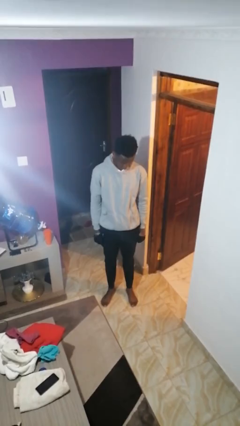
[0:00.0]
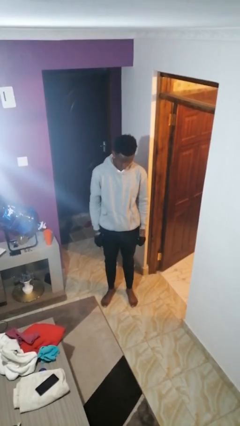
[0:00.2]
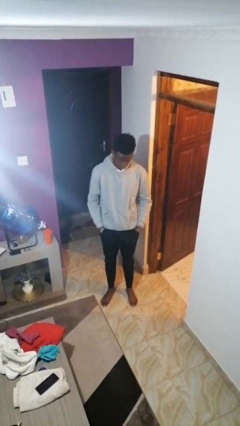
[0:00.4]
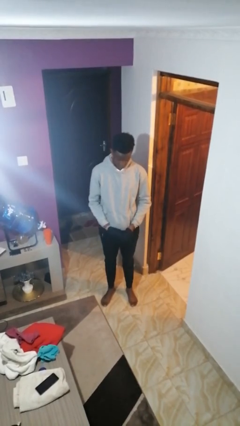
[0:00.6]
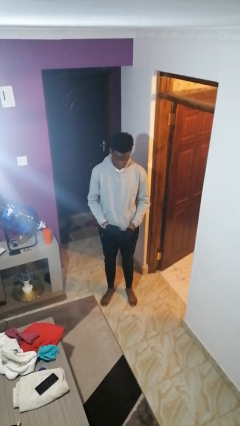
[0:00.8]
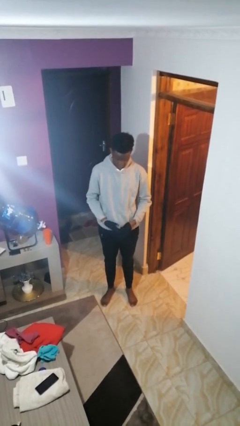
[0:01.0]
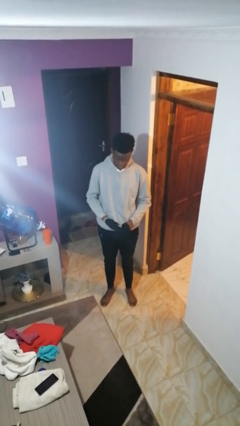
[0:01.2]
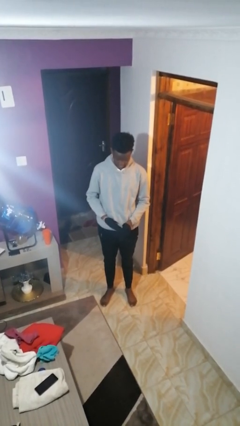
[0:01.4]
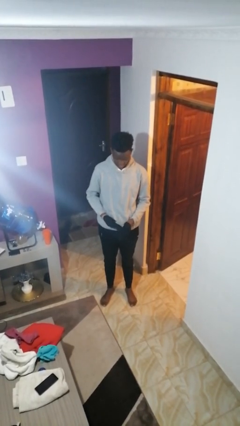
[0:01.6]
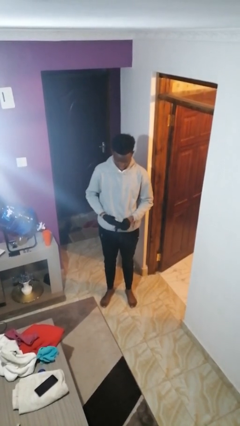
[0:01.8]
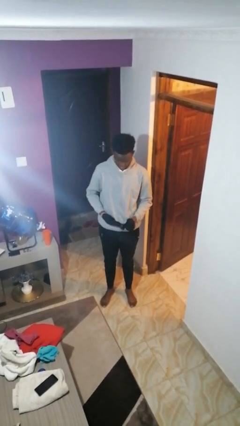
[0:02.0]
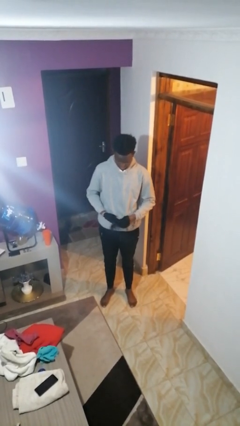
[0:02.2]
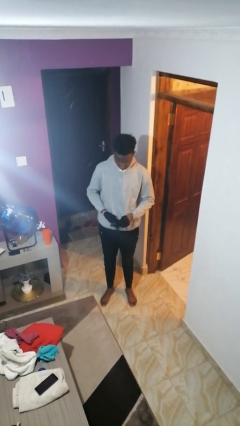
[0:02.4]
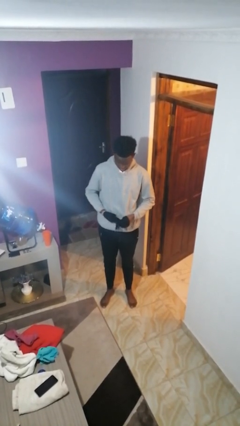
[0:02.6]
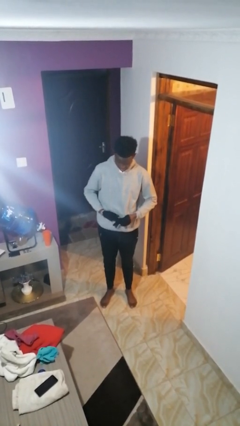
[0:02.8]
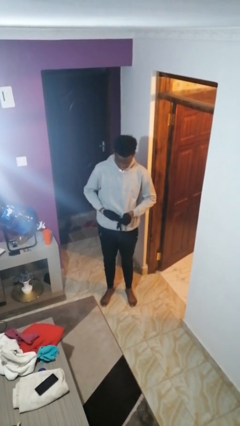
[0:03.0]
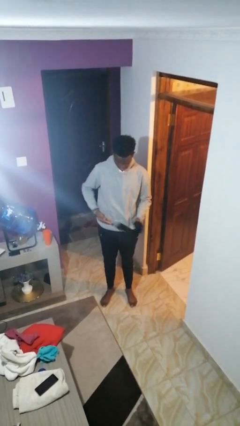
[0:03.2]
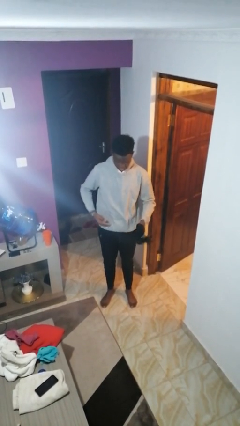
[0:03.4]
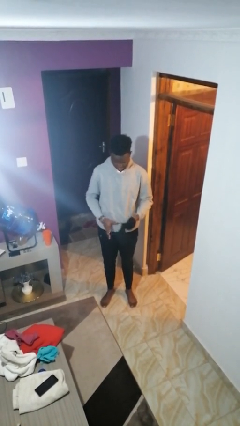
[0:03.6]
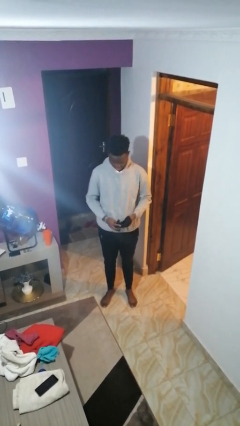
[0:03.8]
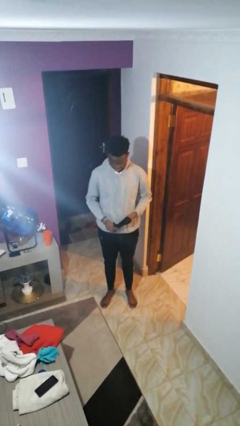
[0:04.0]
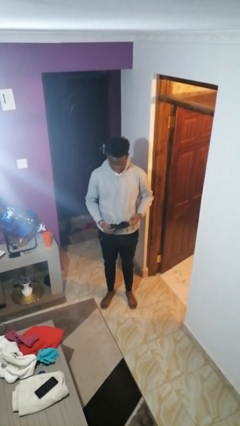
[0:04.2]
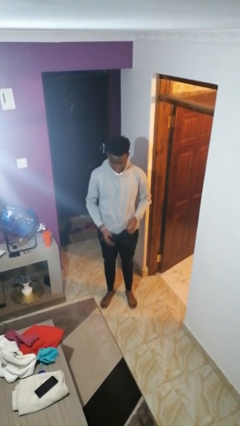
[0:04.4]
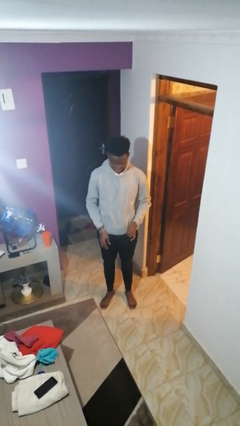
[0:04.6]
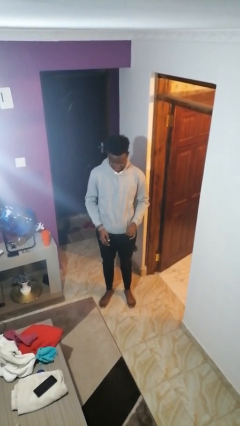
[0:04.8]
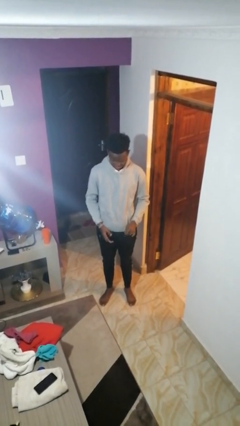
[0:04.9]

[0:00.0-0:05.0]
person takes off gloves

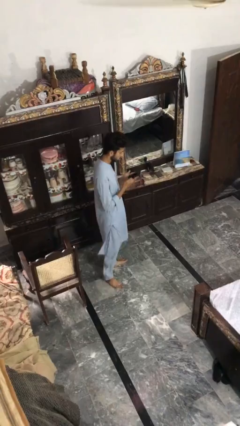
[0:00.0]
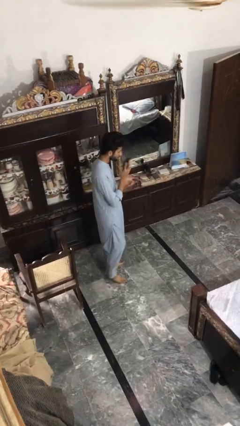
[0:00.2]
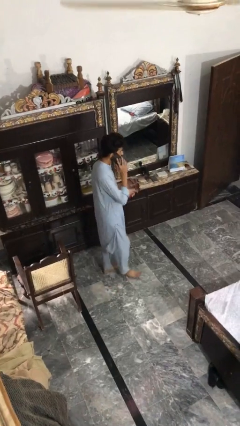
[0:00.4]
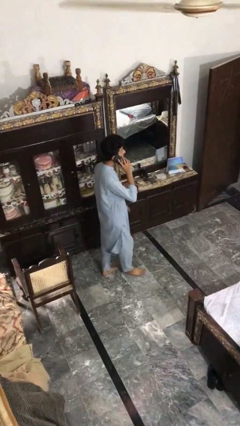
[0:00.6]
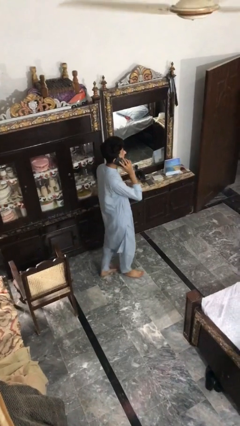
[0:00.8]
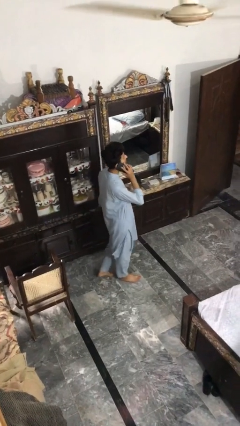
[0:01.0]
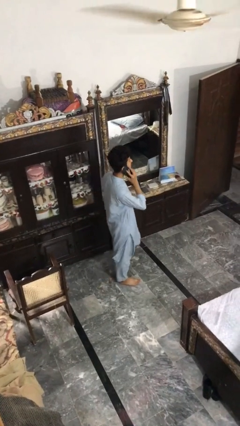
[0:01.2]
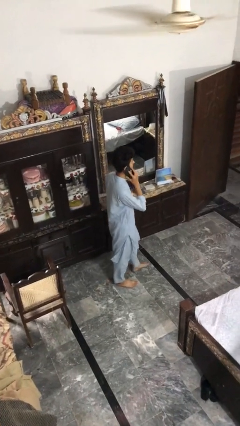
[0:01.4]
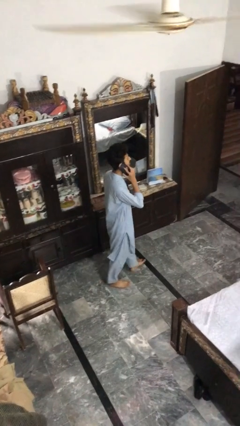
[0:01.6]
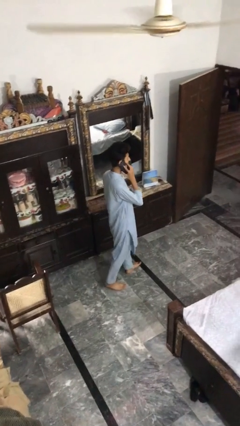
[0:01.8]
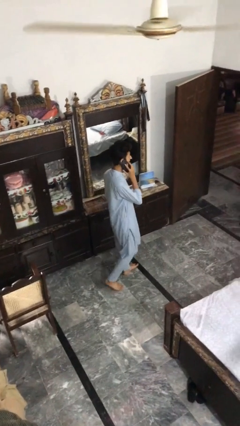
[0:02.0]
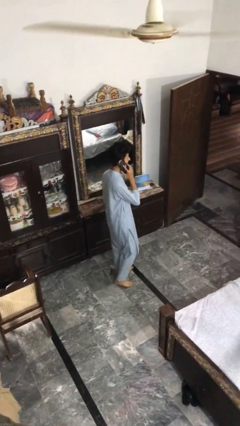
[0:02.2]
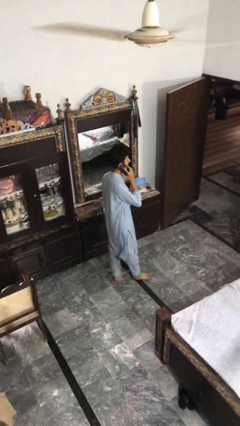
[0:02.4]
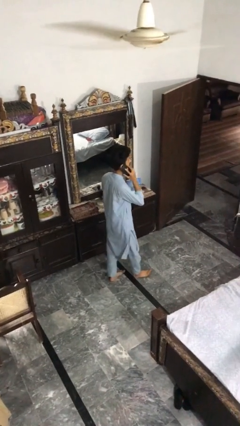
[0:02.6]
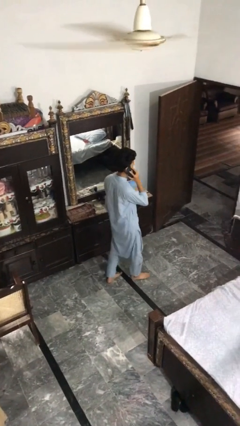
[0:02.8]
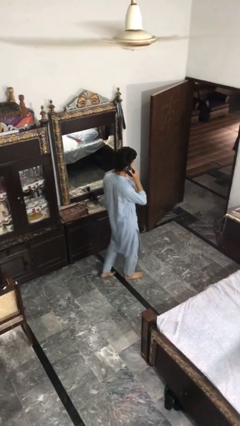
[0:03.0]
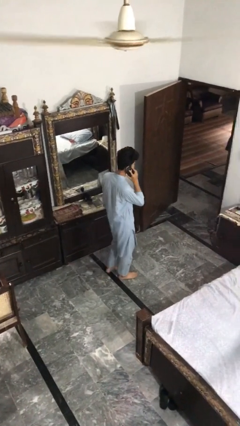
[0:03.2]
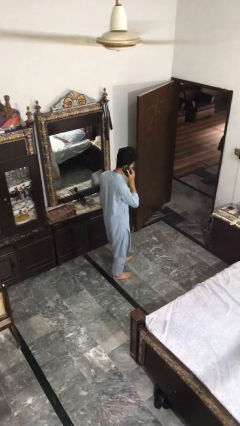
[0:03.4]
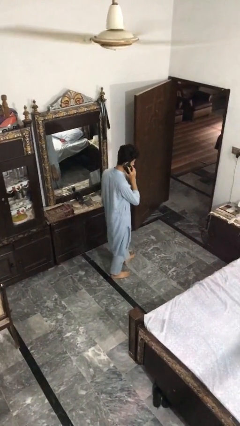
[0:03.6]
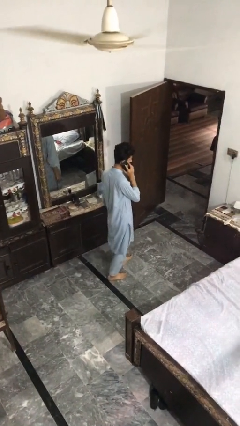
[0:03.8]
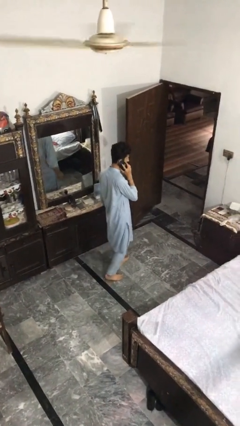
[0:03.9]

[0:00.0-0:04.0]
person talks on phone

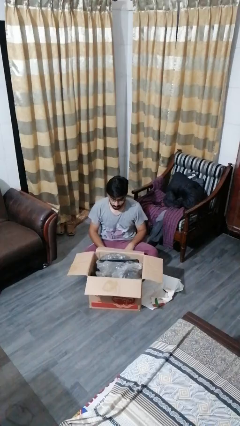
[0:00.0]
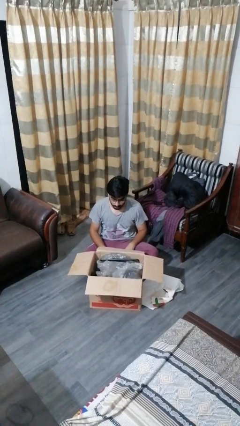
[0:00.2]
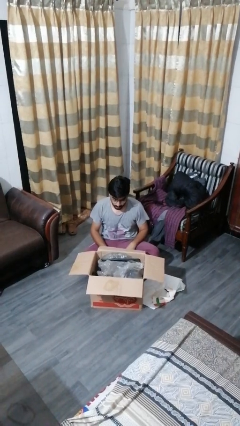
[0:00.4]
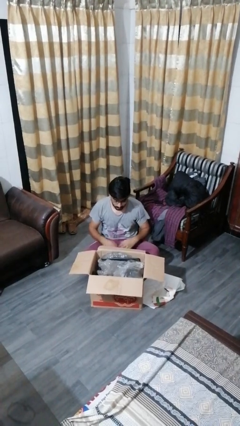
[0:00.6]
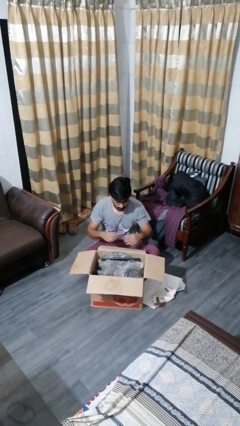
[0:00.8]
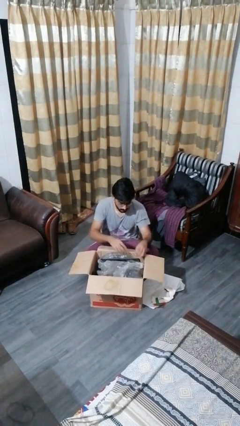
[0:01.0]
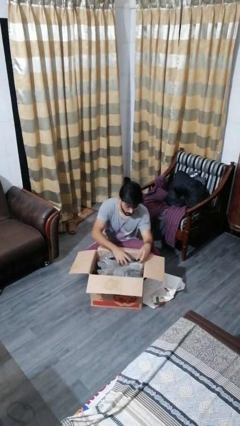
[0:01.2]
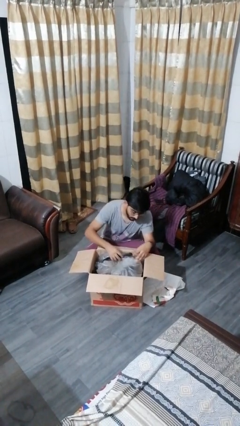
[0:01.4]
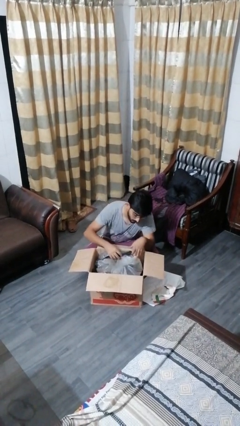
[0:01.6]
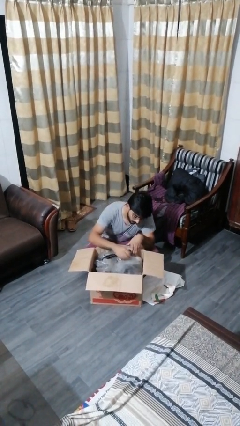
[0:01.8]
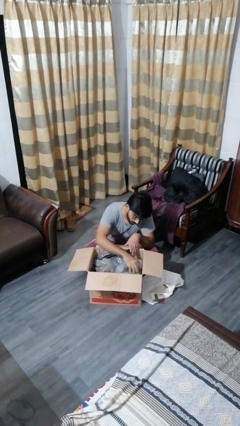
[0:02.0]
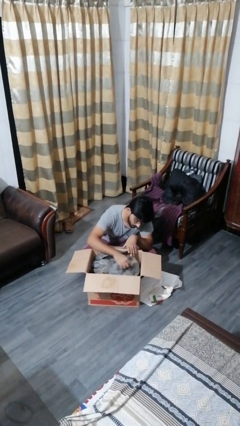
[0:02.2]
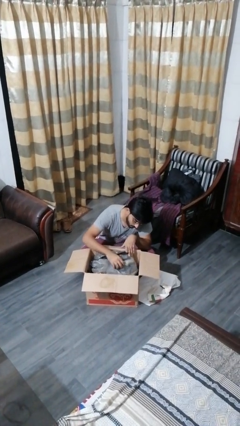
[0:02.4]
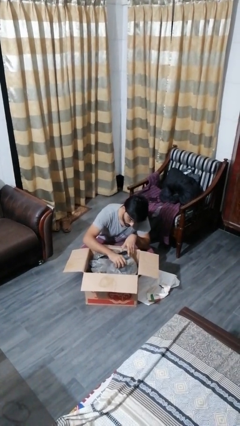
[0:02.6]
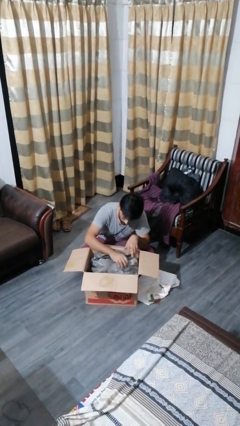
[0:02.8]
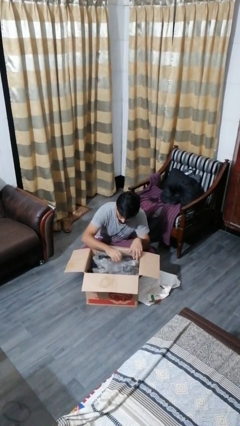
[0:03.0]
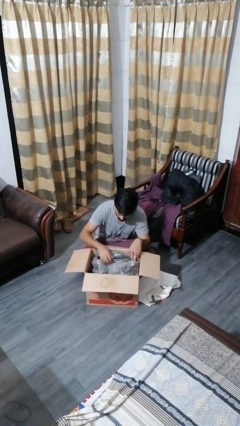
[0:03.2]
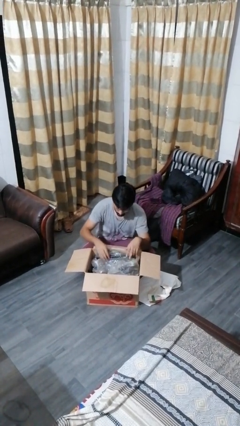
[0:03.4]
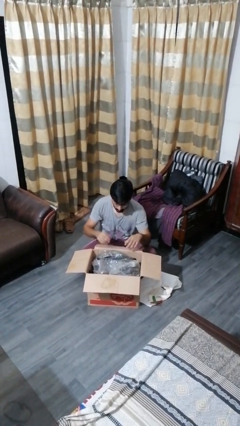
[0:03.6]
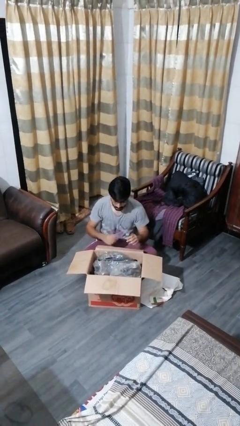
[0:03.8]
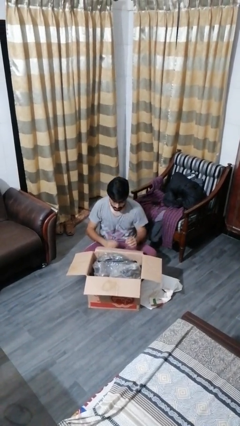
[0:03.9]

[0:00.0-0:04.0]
person searches in box

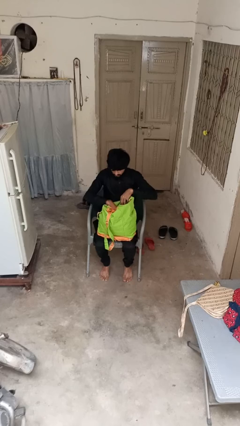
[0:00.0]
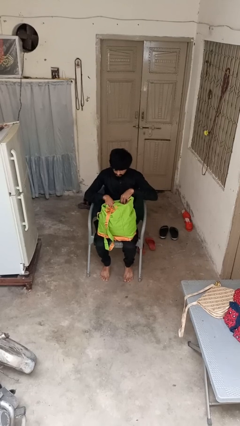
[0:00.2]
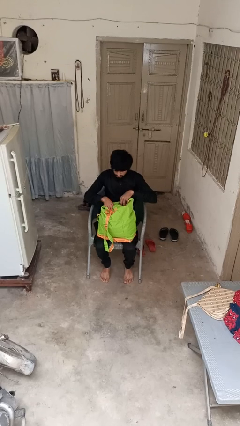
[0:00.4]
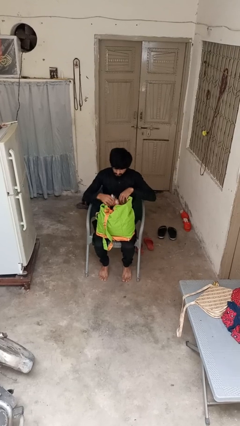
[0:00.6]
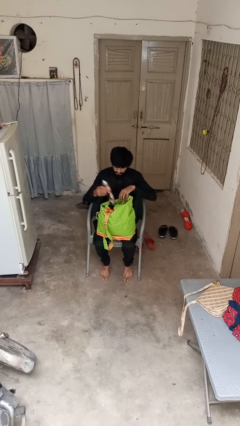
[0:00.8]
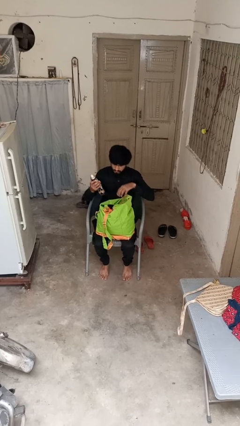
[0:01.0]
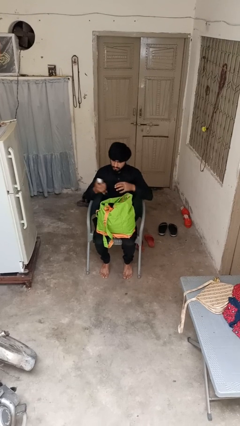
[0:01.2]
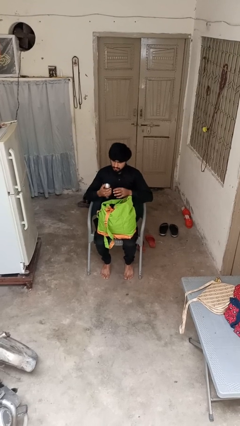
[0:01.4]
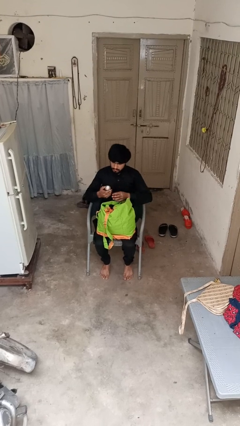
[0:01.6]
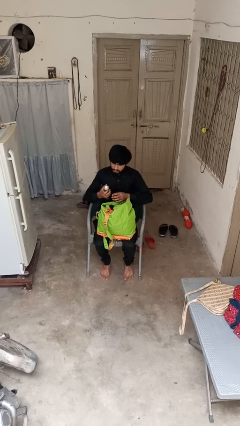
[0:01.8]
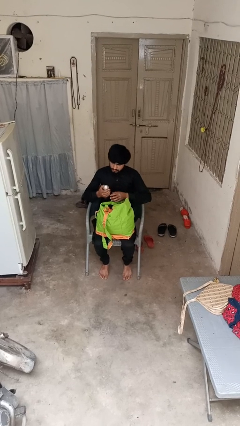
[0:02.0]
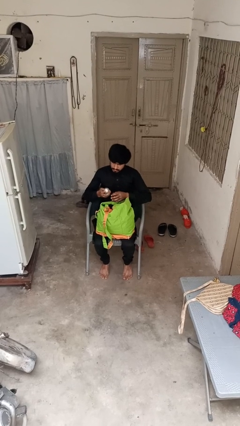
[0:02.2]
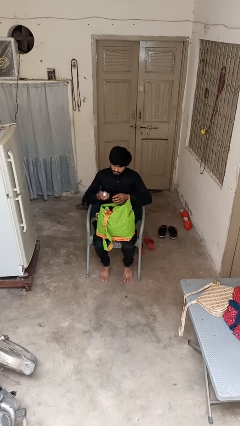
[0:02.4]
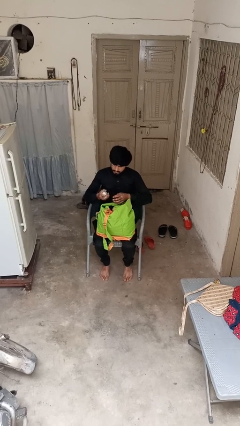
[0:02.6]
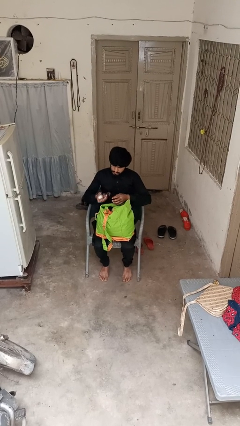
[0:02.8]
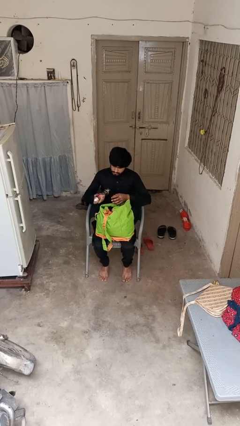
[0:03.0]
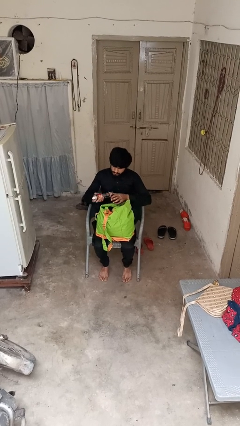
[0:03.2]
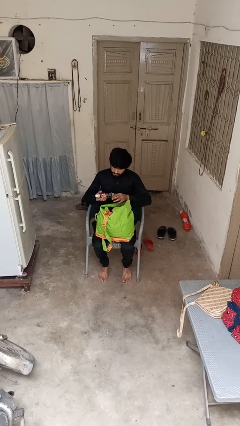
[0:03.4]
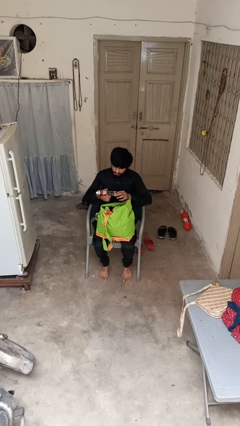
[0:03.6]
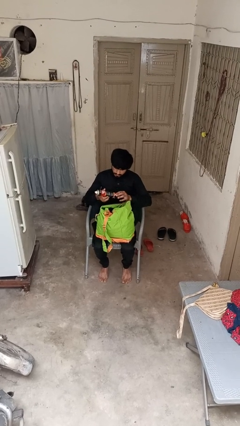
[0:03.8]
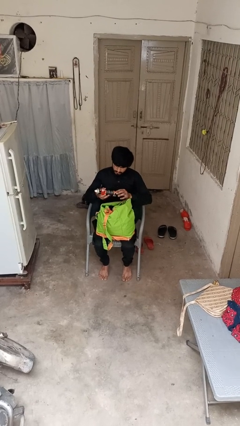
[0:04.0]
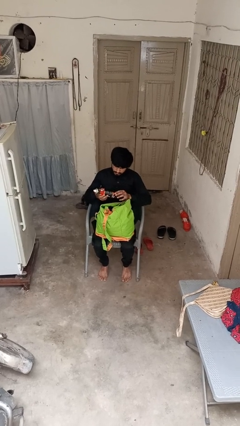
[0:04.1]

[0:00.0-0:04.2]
person takes object from backpack

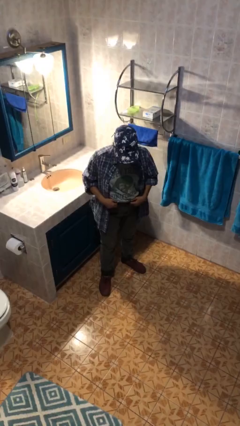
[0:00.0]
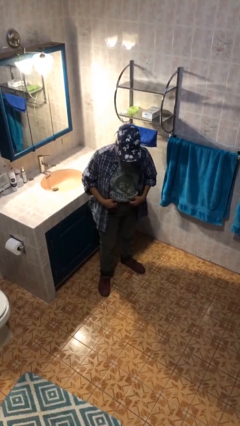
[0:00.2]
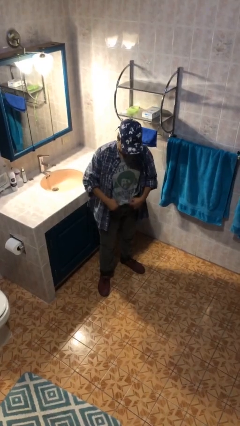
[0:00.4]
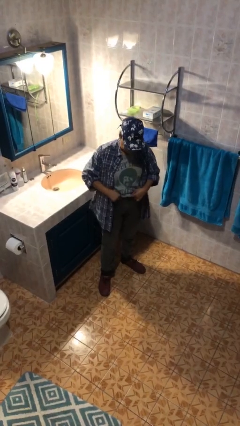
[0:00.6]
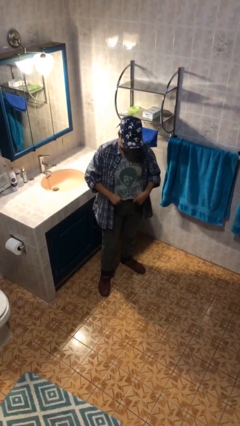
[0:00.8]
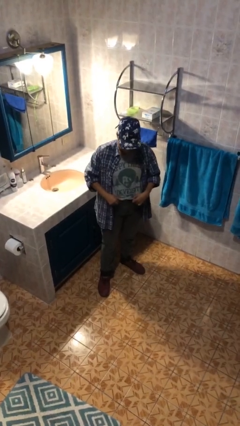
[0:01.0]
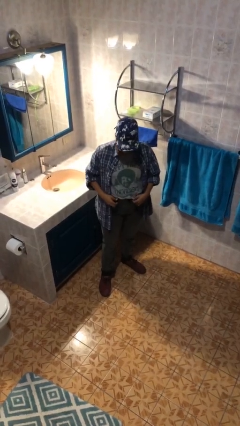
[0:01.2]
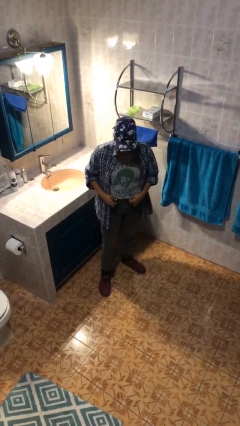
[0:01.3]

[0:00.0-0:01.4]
person hikes up pants
